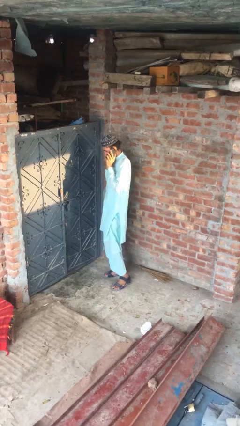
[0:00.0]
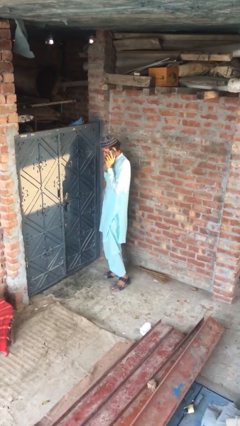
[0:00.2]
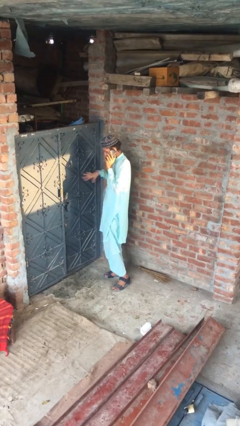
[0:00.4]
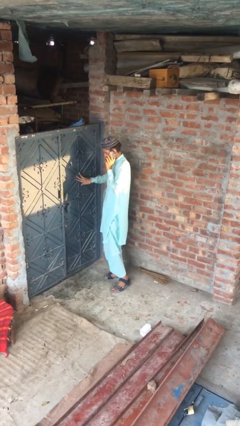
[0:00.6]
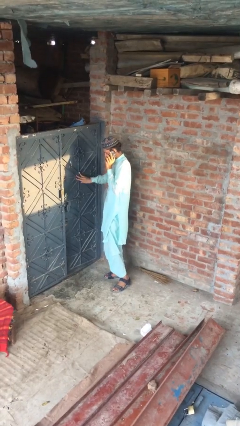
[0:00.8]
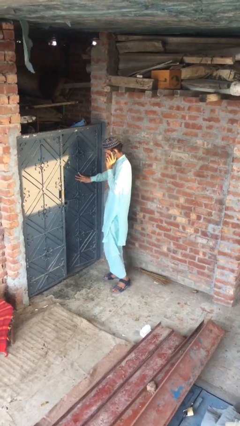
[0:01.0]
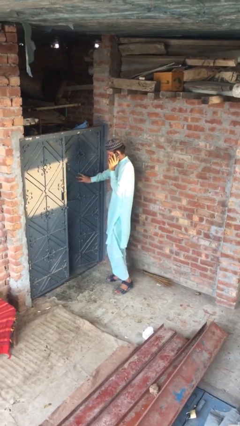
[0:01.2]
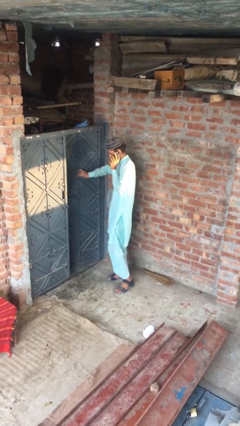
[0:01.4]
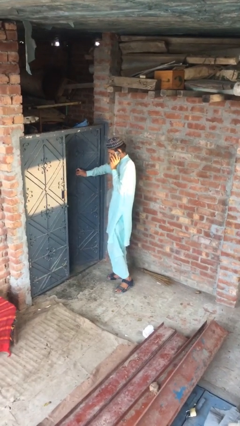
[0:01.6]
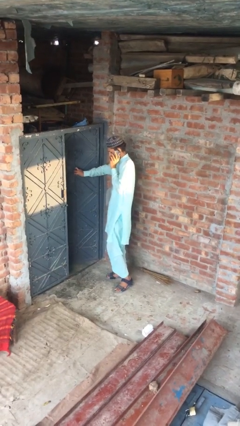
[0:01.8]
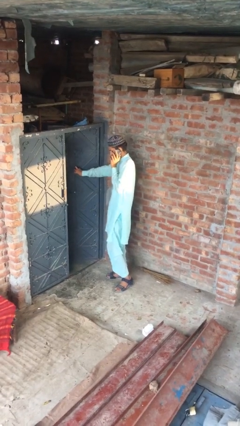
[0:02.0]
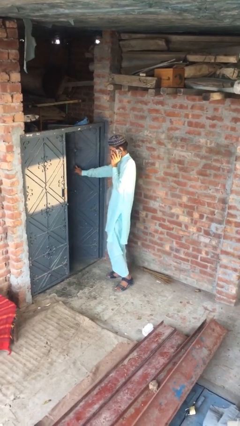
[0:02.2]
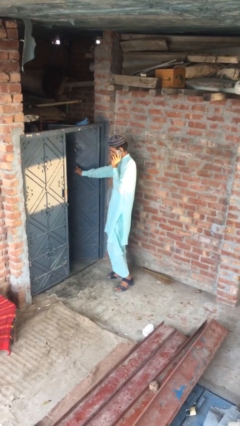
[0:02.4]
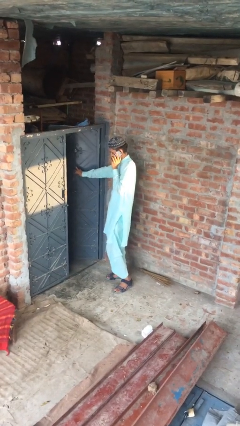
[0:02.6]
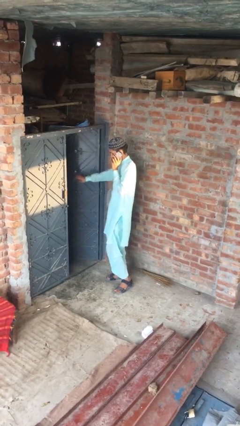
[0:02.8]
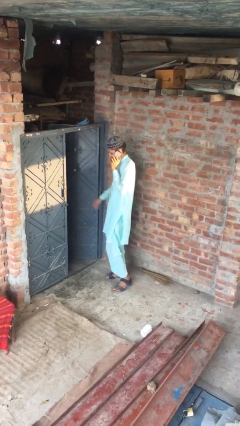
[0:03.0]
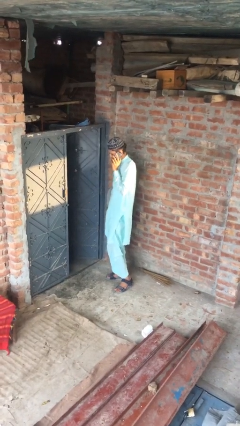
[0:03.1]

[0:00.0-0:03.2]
person opens facility door

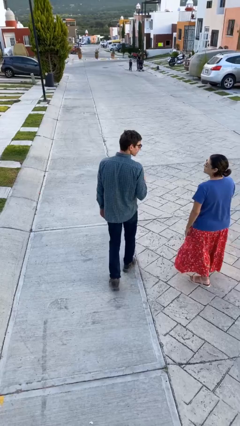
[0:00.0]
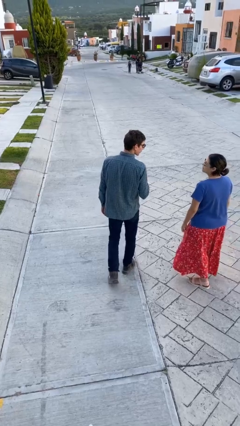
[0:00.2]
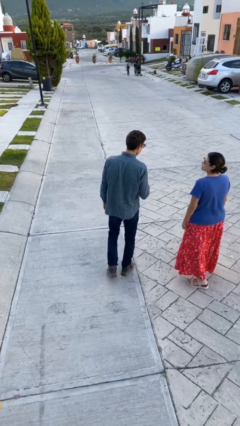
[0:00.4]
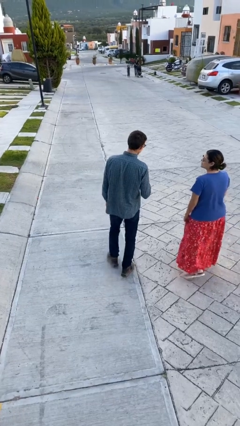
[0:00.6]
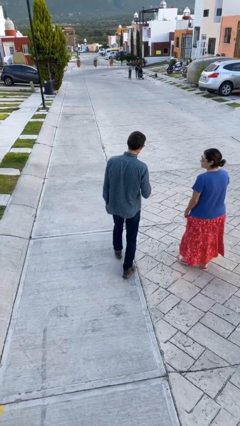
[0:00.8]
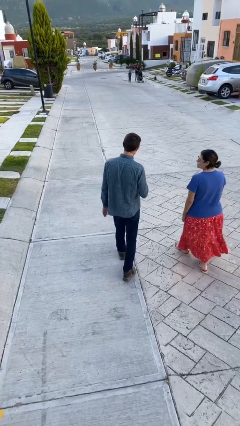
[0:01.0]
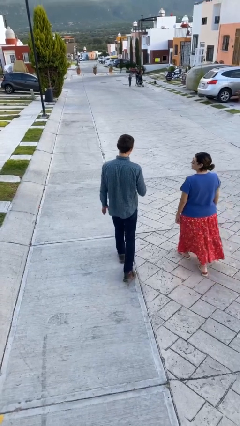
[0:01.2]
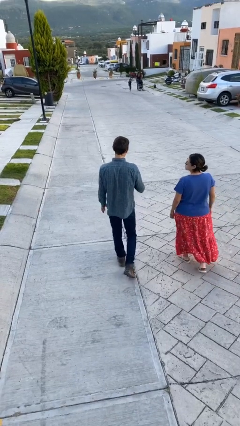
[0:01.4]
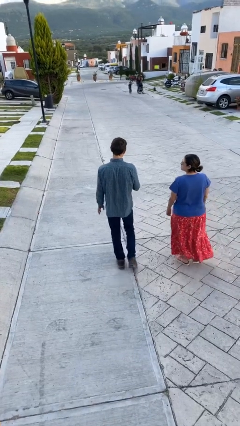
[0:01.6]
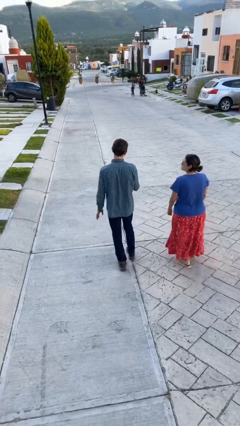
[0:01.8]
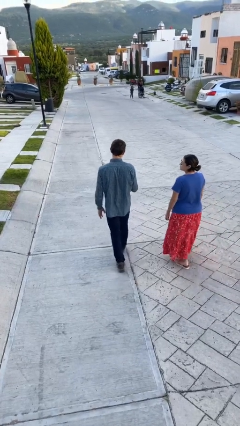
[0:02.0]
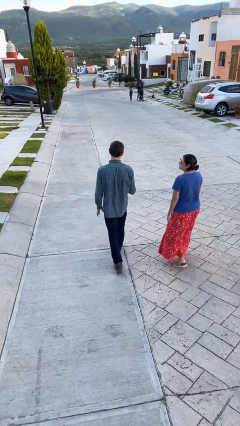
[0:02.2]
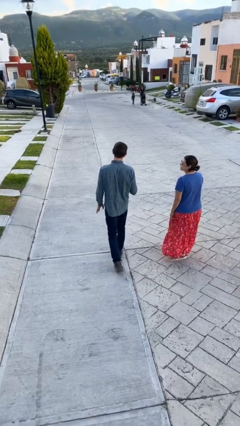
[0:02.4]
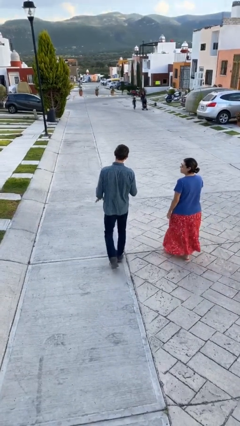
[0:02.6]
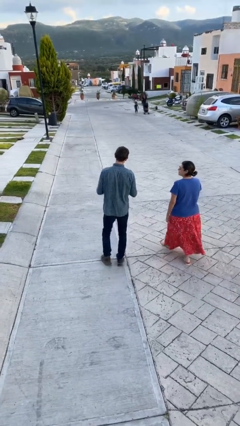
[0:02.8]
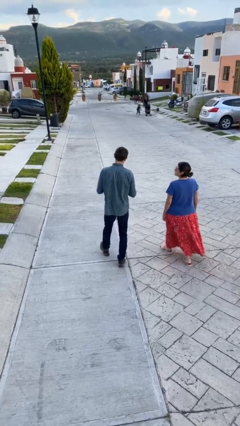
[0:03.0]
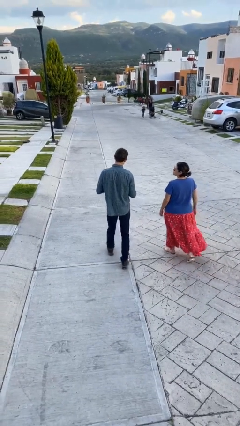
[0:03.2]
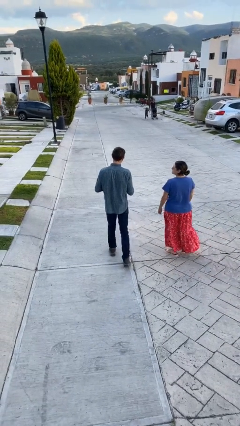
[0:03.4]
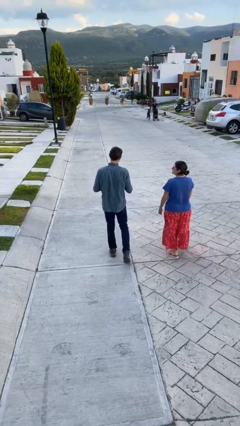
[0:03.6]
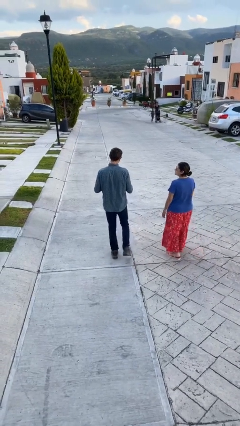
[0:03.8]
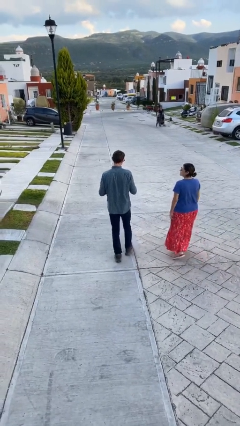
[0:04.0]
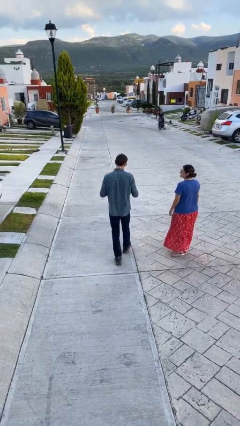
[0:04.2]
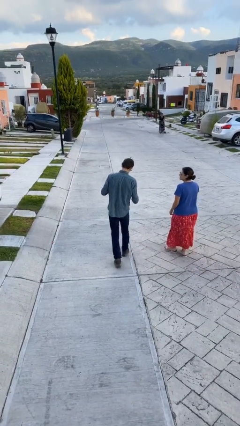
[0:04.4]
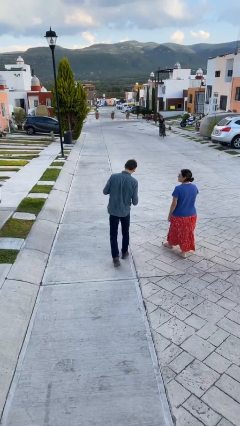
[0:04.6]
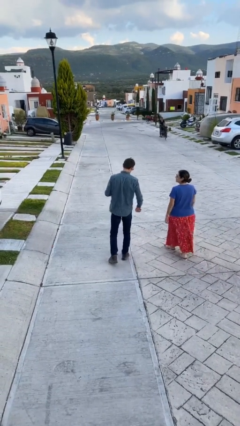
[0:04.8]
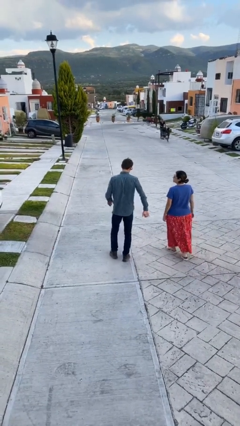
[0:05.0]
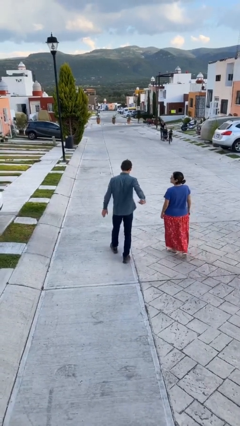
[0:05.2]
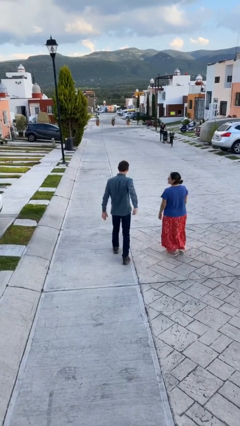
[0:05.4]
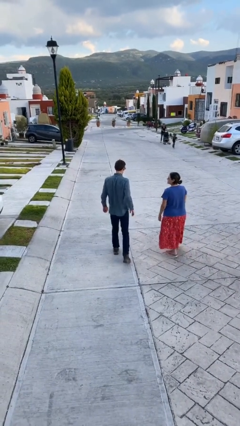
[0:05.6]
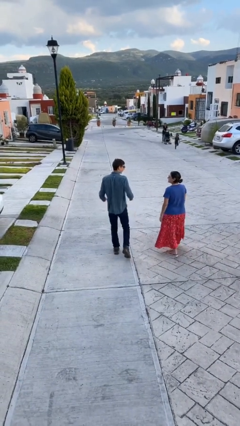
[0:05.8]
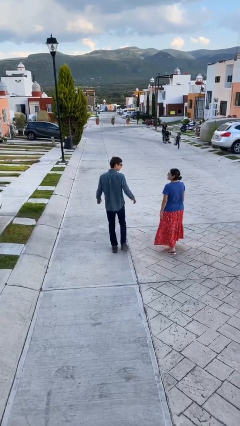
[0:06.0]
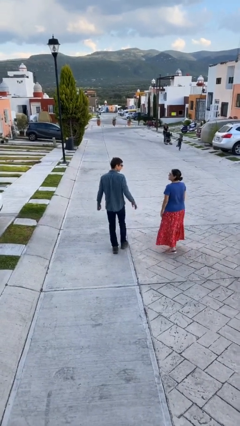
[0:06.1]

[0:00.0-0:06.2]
person talks to person

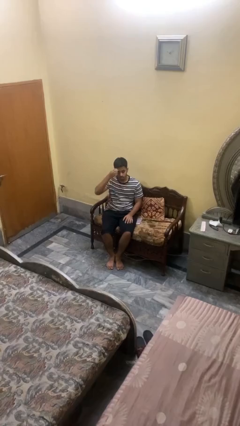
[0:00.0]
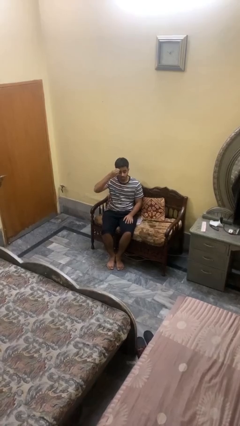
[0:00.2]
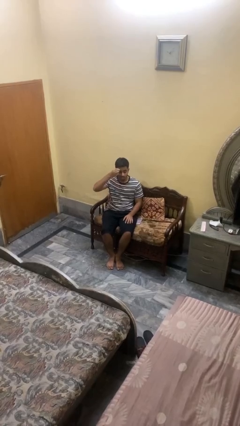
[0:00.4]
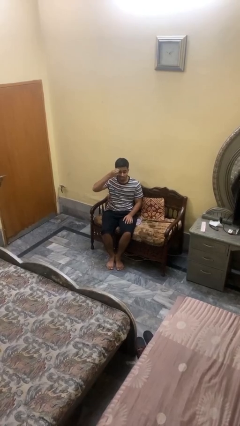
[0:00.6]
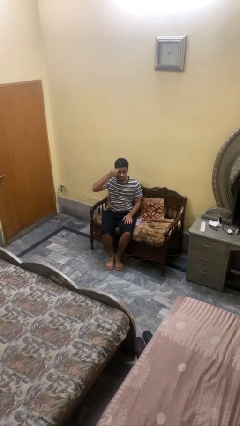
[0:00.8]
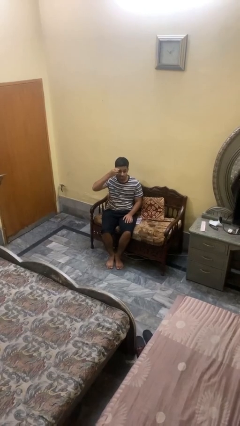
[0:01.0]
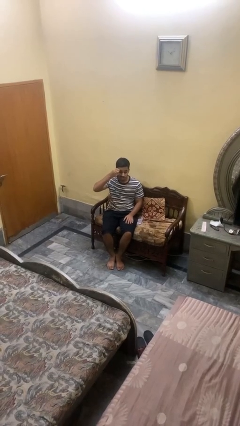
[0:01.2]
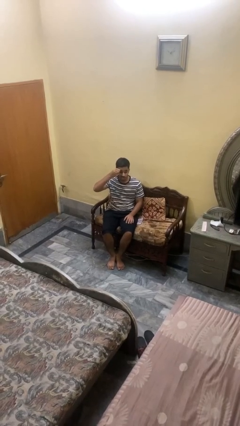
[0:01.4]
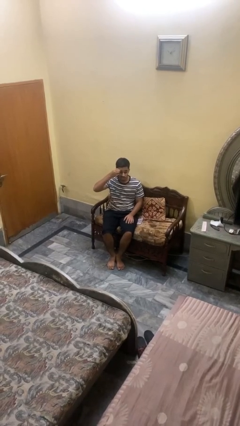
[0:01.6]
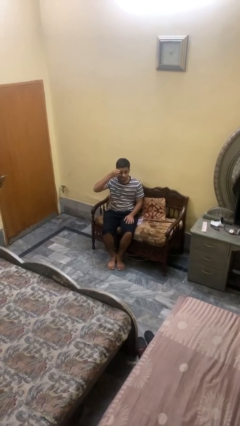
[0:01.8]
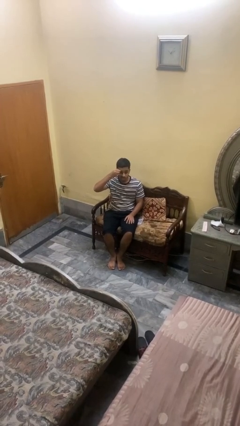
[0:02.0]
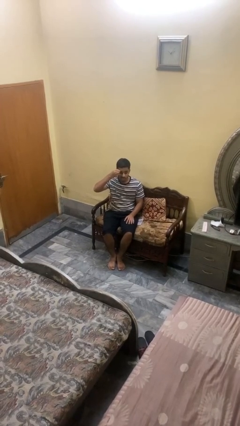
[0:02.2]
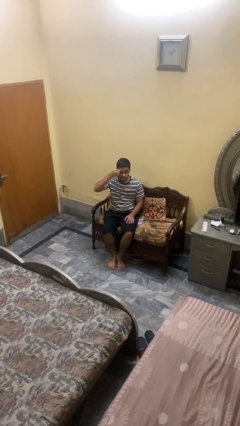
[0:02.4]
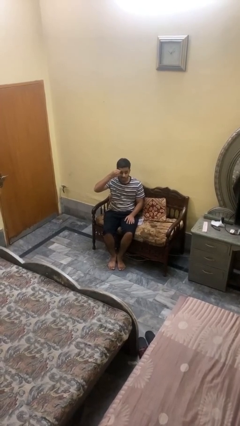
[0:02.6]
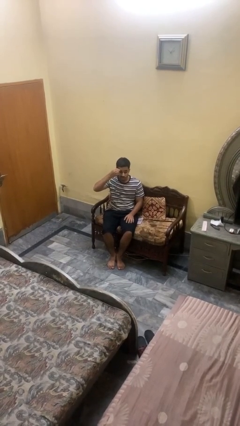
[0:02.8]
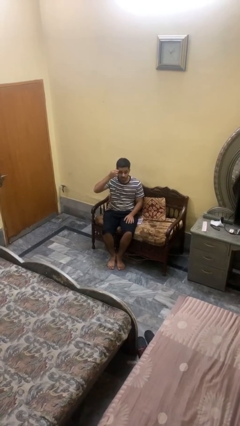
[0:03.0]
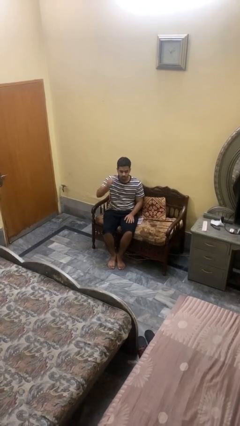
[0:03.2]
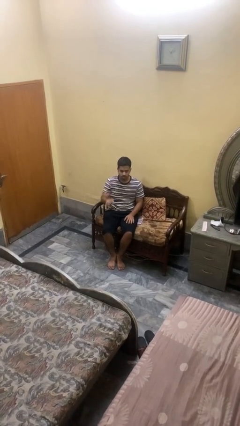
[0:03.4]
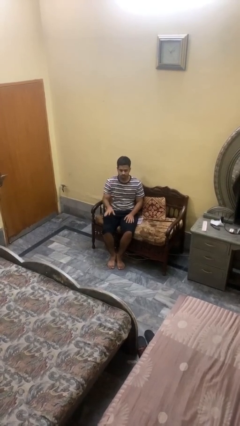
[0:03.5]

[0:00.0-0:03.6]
person scratches face

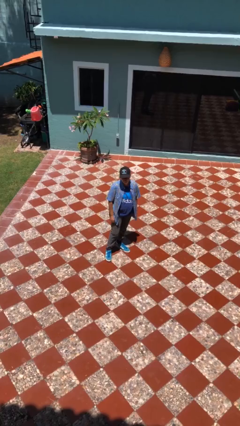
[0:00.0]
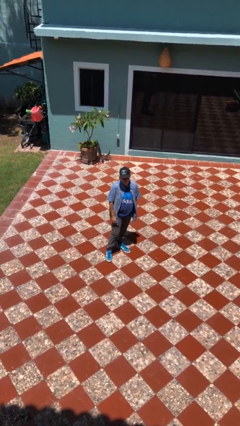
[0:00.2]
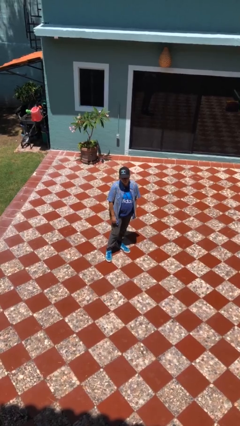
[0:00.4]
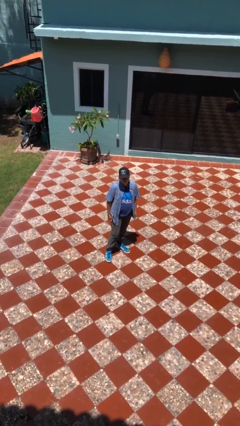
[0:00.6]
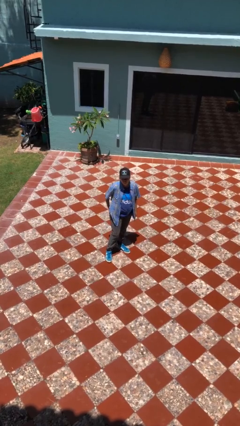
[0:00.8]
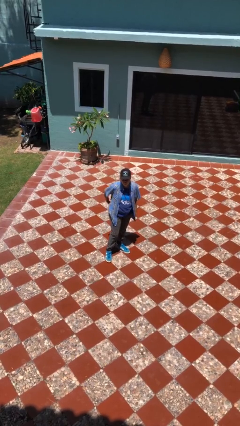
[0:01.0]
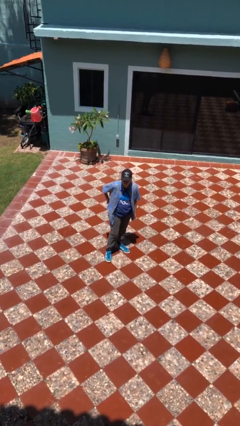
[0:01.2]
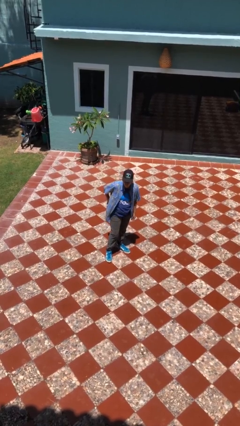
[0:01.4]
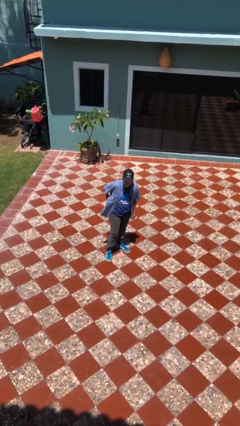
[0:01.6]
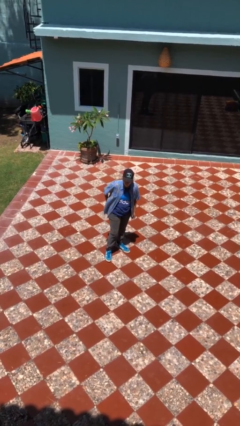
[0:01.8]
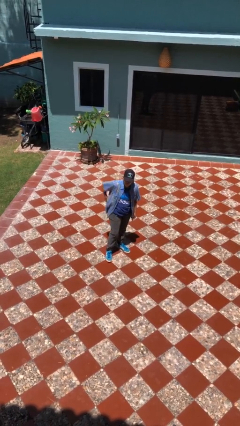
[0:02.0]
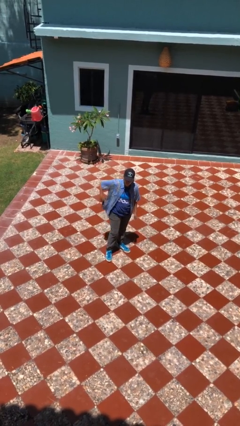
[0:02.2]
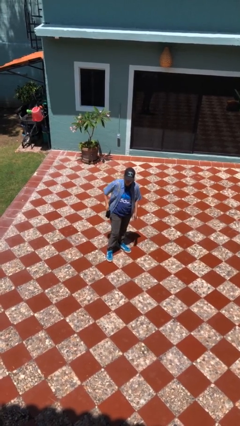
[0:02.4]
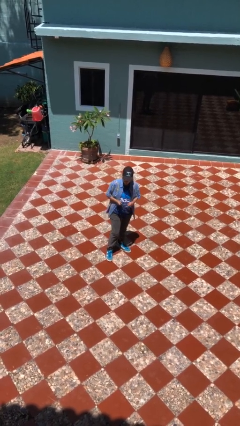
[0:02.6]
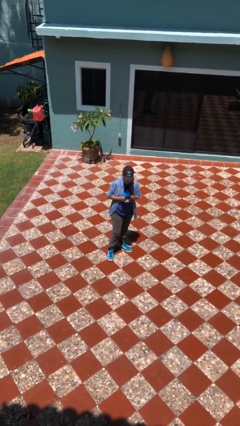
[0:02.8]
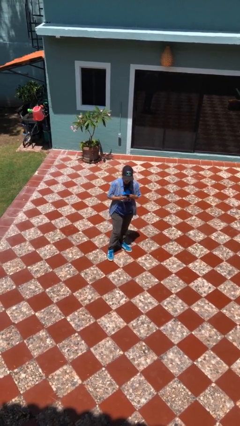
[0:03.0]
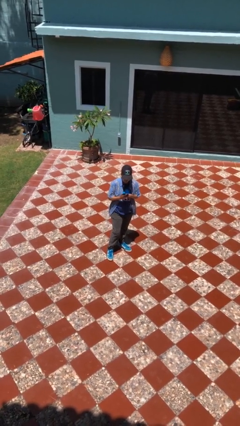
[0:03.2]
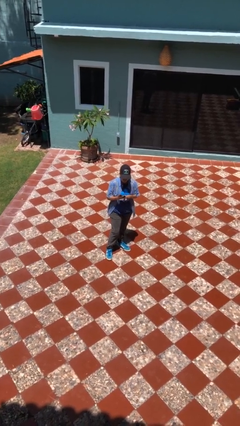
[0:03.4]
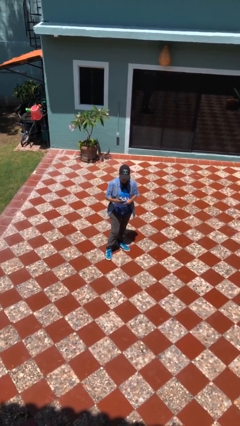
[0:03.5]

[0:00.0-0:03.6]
person takes phone from pocket

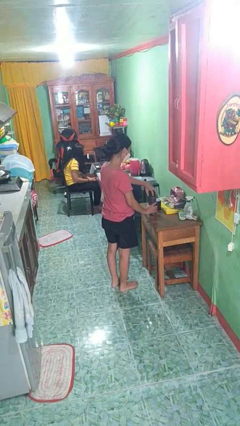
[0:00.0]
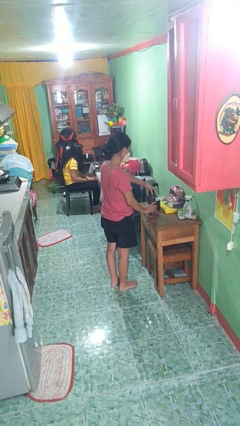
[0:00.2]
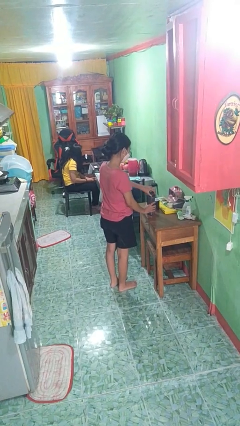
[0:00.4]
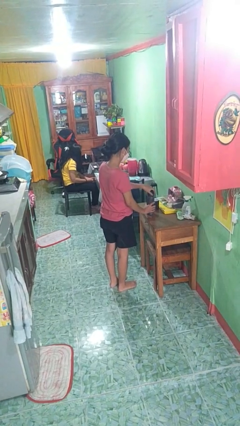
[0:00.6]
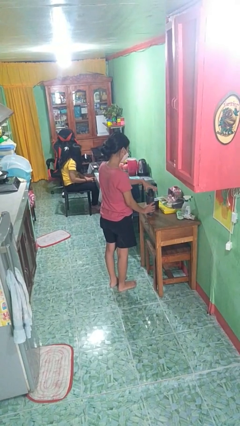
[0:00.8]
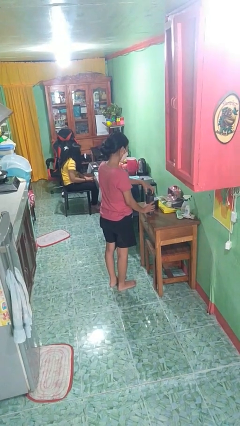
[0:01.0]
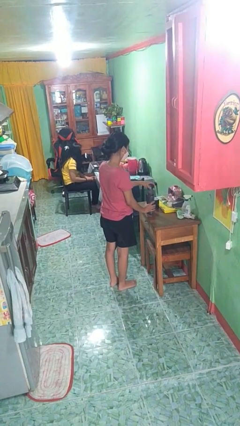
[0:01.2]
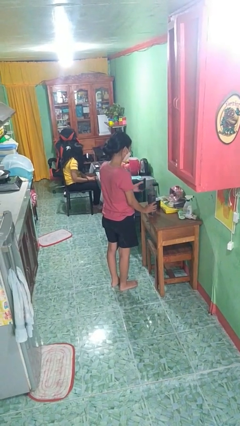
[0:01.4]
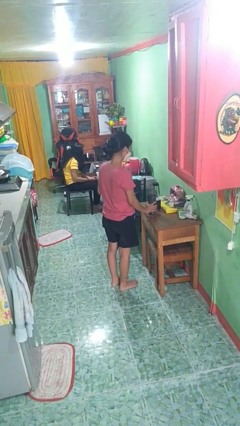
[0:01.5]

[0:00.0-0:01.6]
person unscrews lid from bottle
